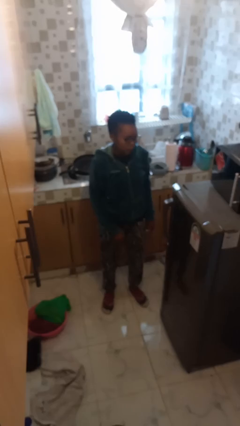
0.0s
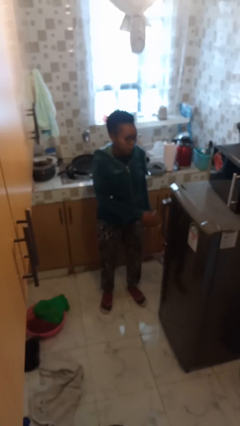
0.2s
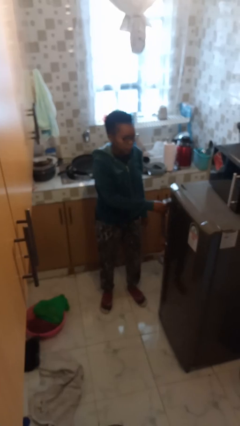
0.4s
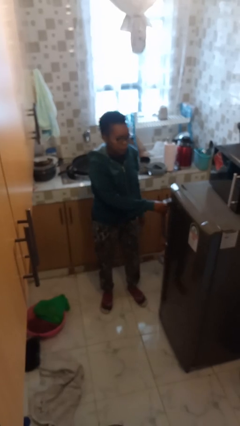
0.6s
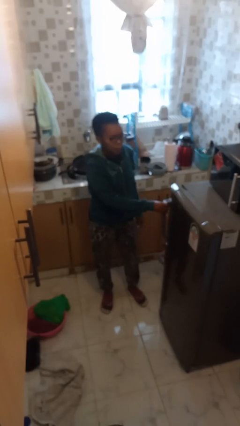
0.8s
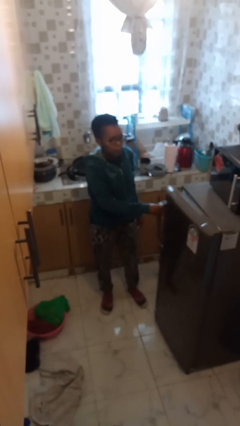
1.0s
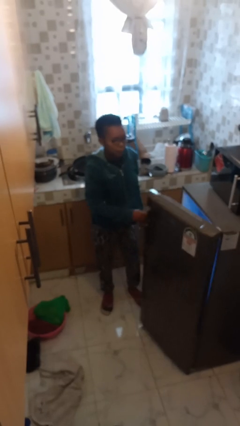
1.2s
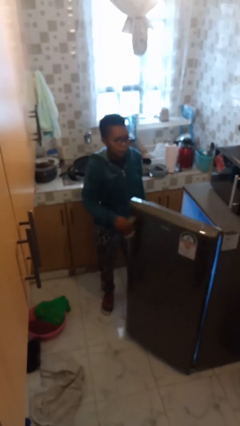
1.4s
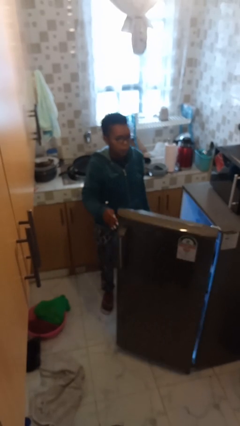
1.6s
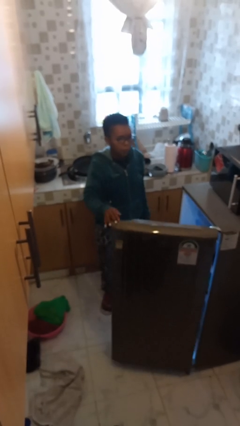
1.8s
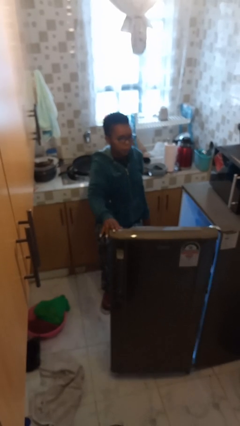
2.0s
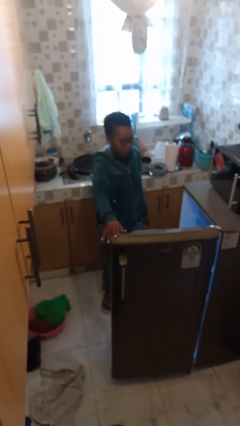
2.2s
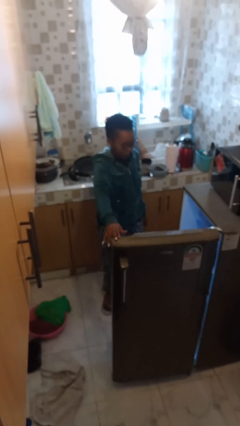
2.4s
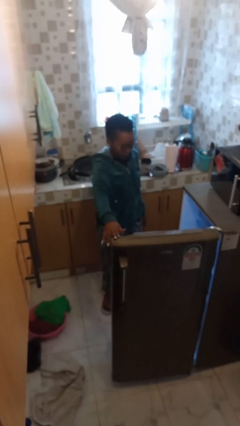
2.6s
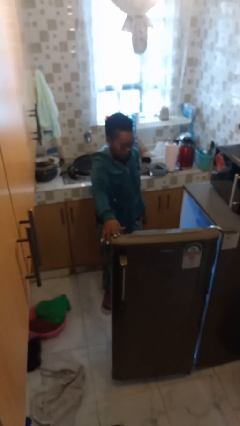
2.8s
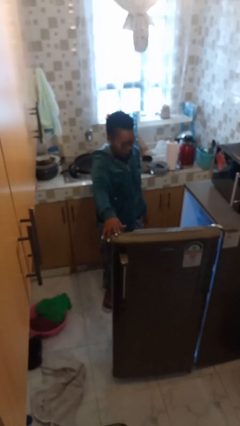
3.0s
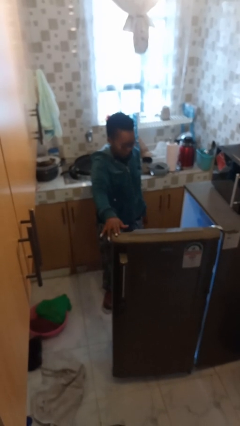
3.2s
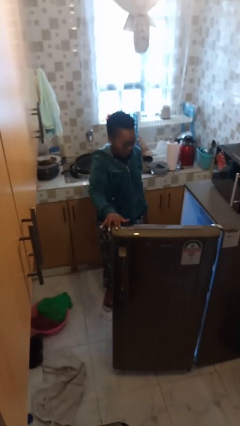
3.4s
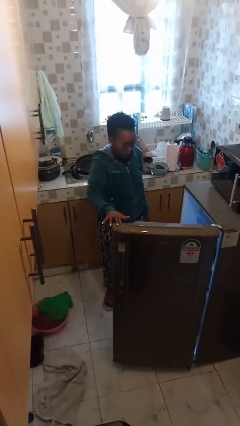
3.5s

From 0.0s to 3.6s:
person opens refrigerator

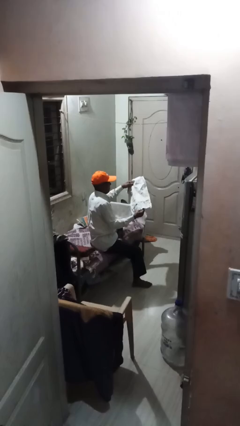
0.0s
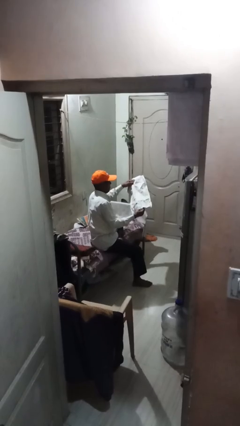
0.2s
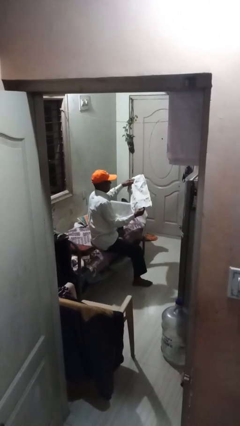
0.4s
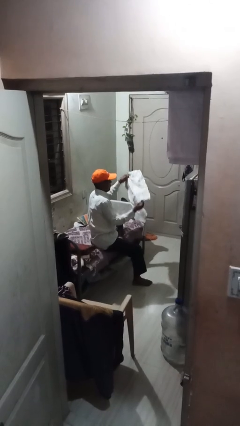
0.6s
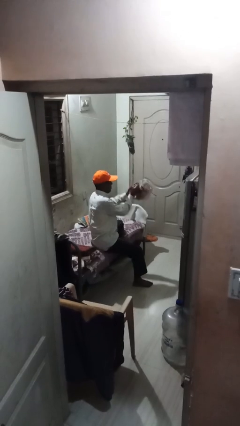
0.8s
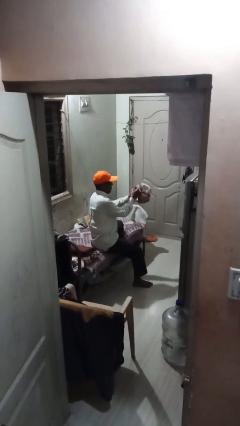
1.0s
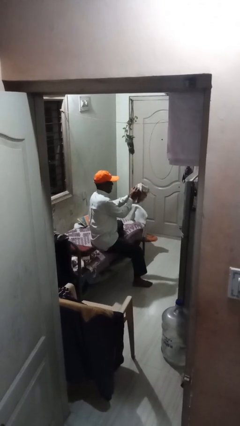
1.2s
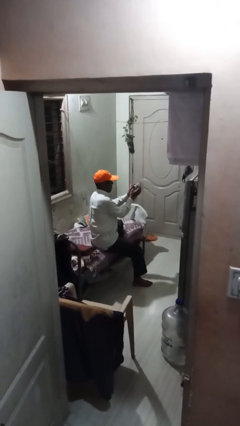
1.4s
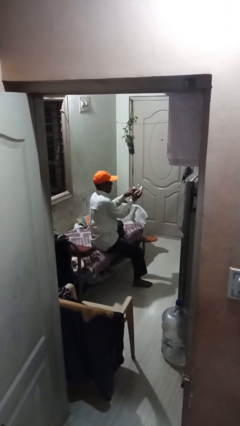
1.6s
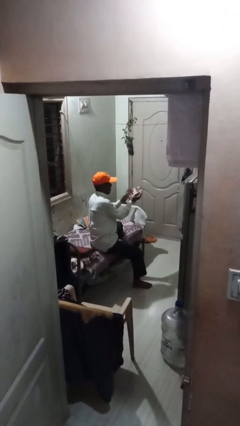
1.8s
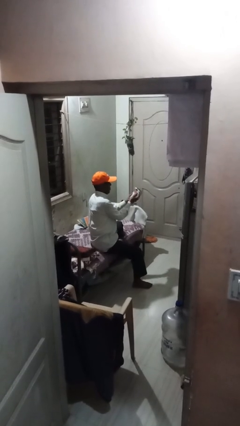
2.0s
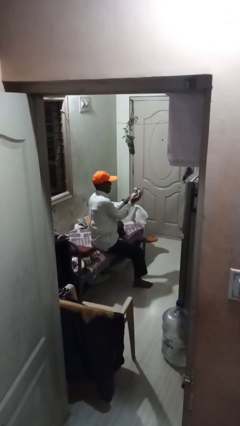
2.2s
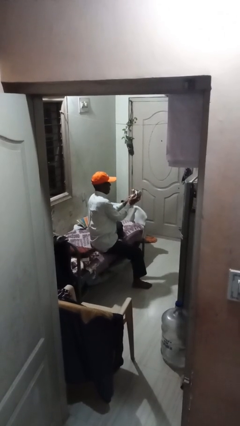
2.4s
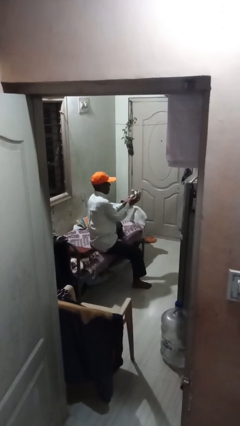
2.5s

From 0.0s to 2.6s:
person crumples paper

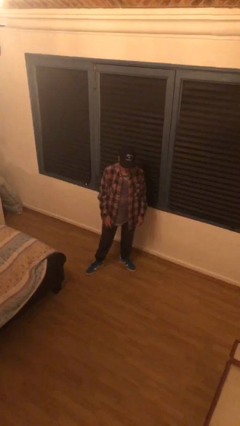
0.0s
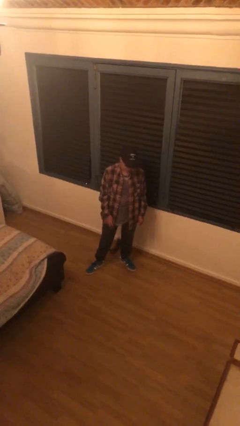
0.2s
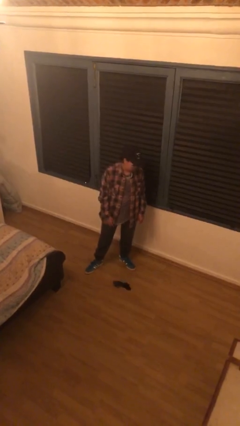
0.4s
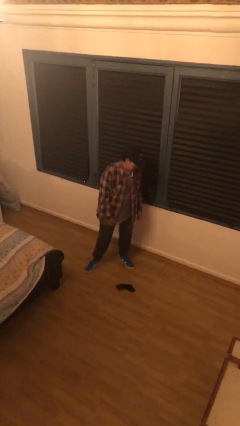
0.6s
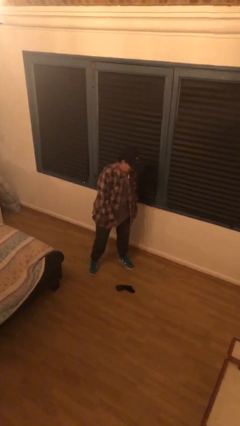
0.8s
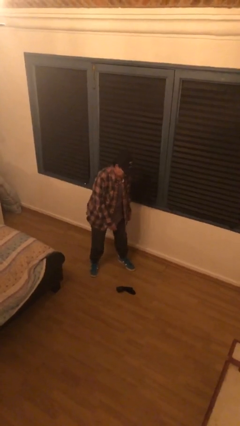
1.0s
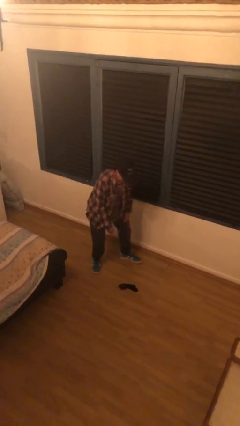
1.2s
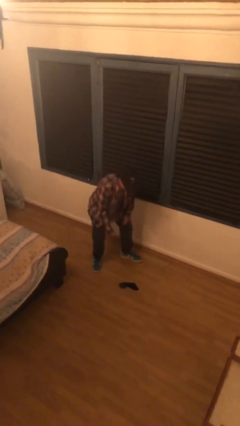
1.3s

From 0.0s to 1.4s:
person drops object

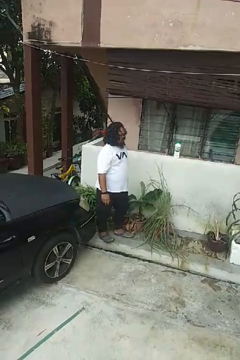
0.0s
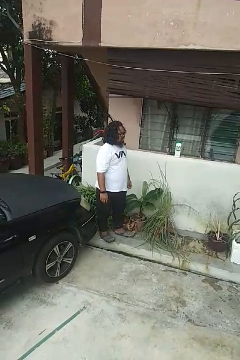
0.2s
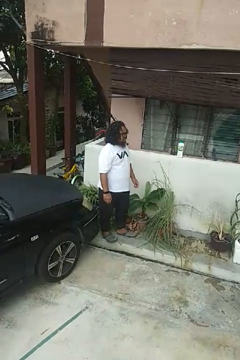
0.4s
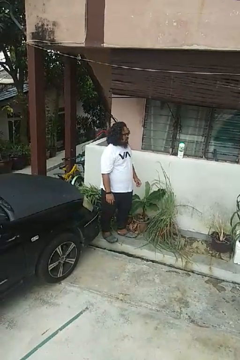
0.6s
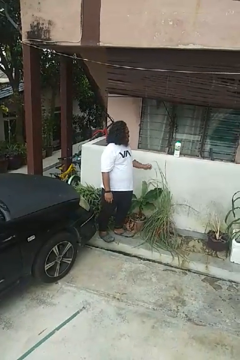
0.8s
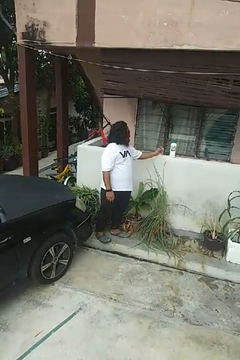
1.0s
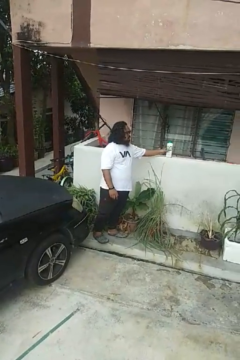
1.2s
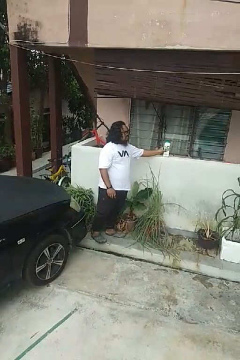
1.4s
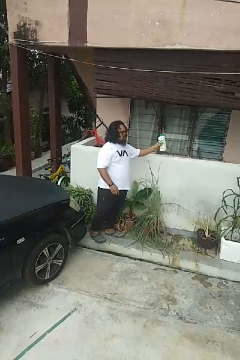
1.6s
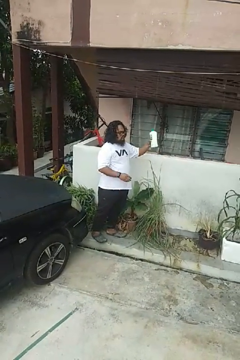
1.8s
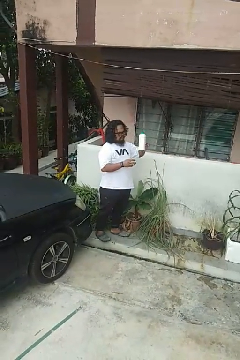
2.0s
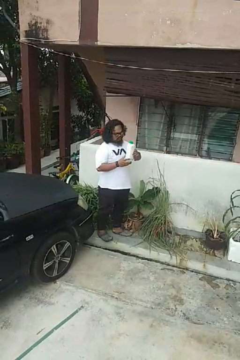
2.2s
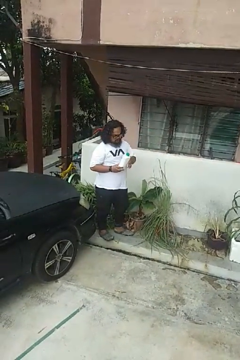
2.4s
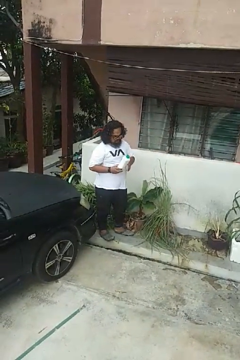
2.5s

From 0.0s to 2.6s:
person picks up object from countertop

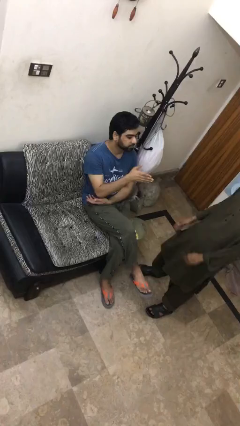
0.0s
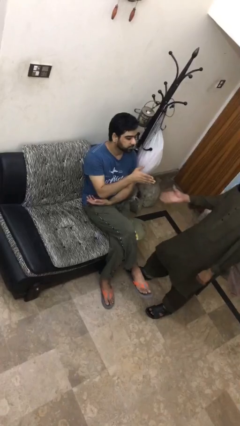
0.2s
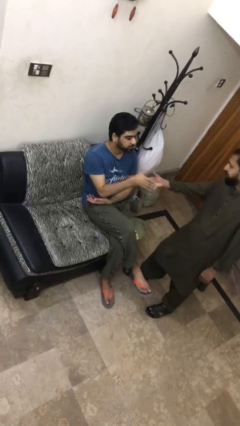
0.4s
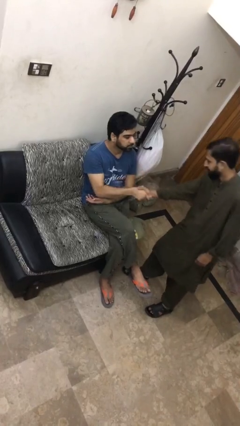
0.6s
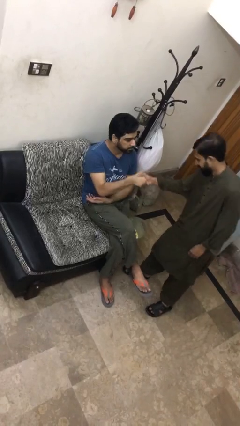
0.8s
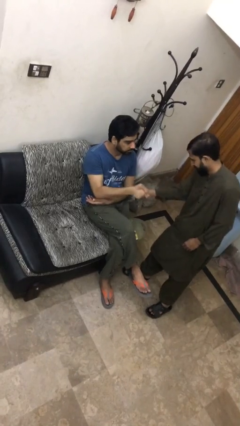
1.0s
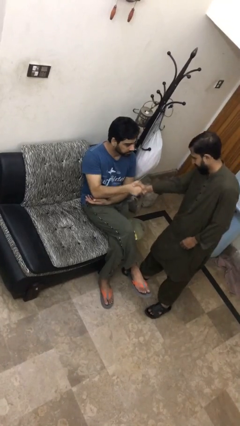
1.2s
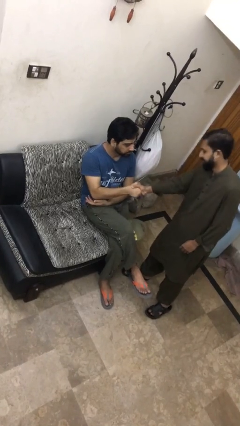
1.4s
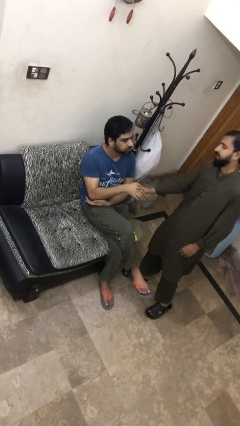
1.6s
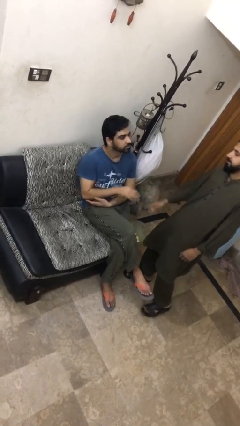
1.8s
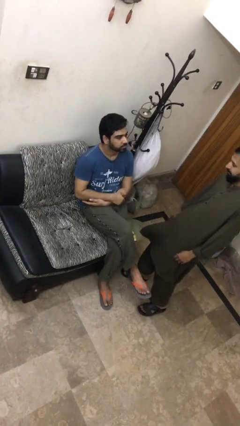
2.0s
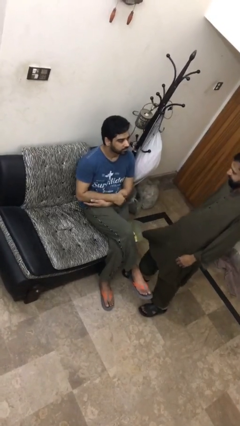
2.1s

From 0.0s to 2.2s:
person shakes hand

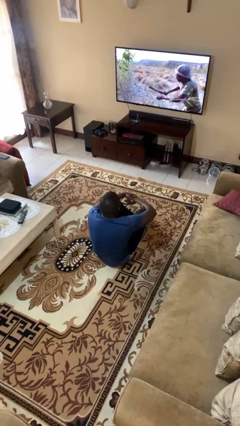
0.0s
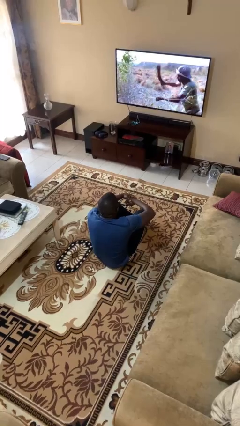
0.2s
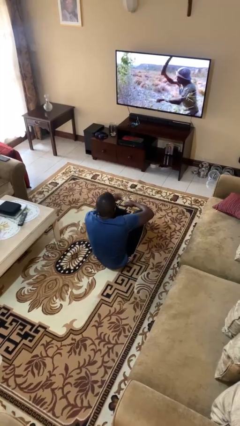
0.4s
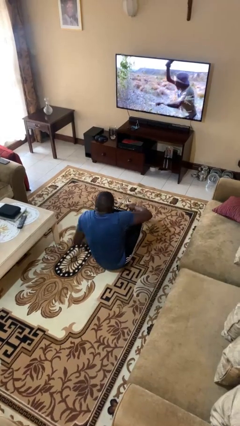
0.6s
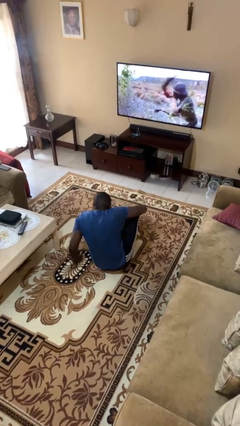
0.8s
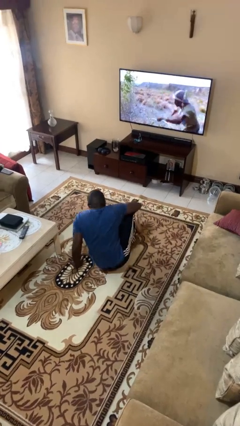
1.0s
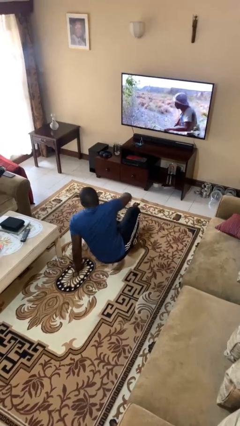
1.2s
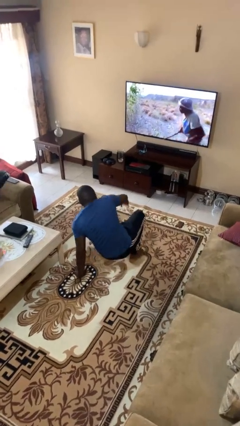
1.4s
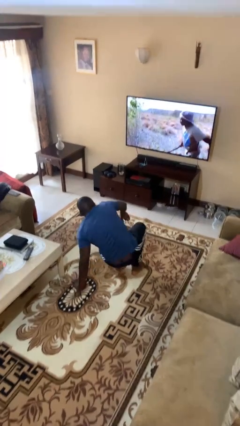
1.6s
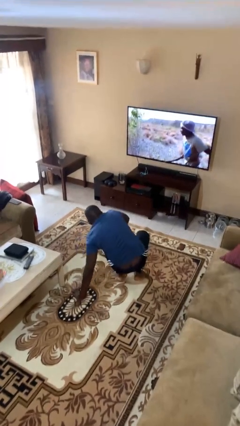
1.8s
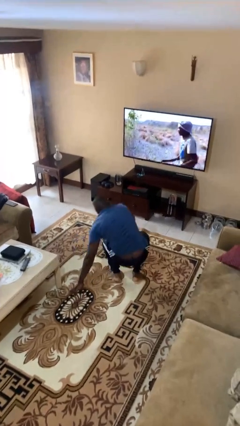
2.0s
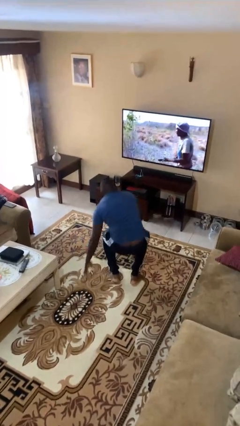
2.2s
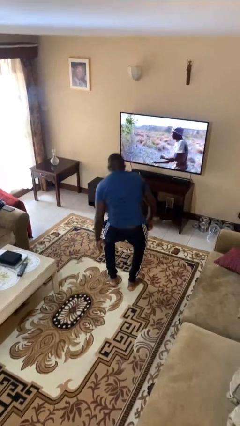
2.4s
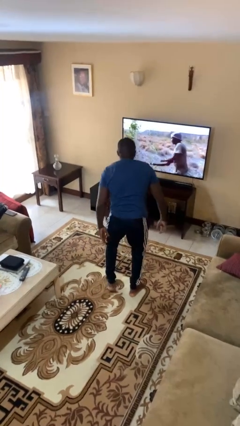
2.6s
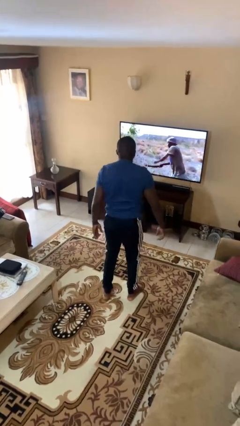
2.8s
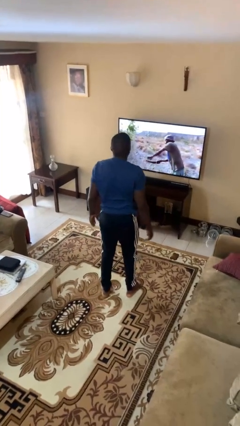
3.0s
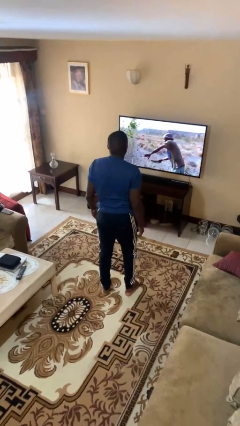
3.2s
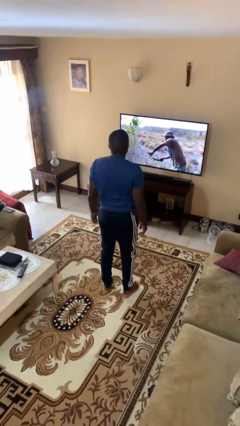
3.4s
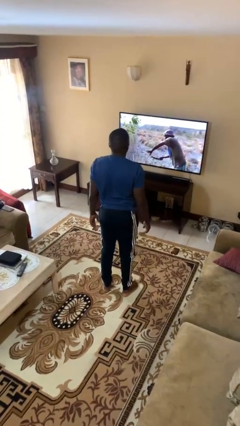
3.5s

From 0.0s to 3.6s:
person stands up from floor

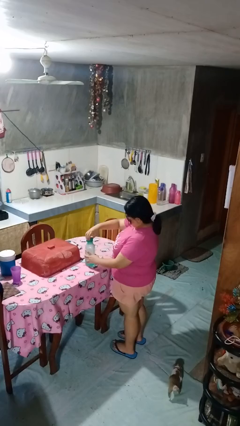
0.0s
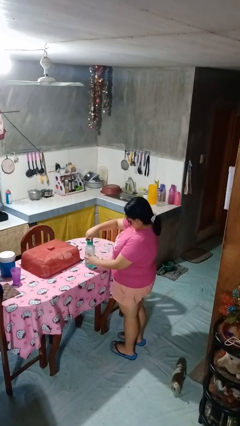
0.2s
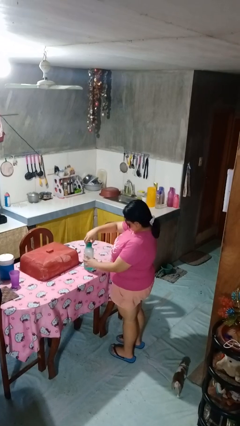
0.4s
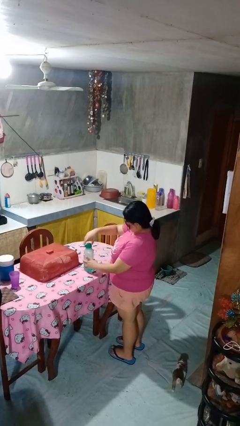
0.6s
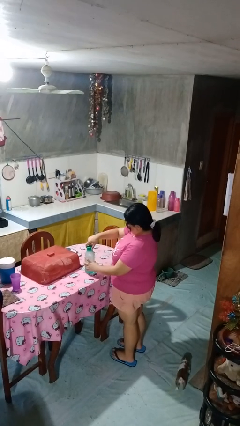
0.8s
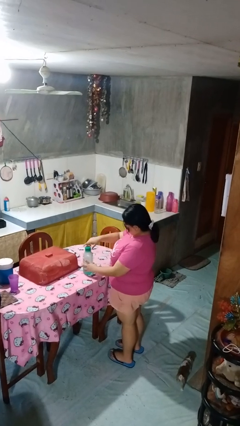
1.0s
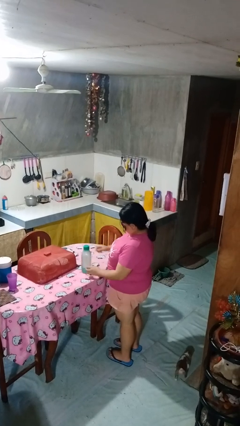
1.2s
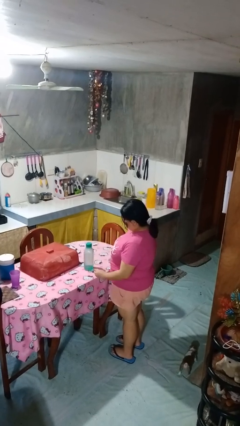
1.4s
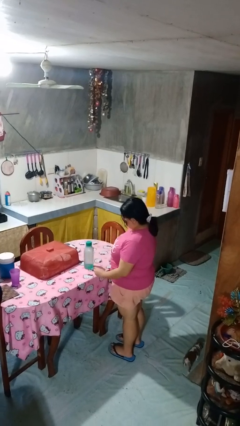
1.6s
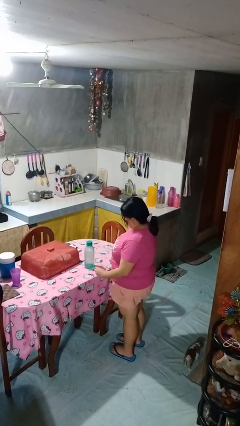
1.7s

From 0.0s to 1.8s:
person screws lid to bottle
